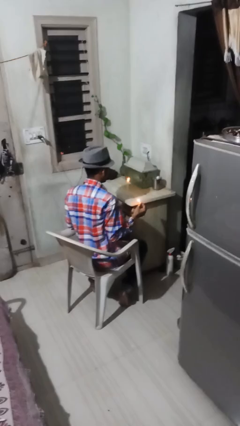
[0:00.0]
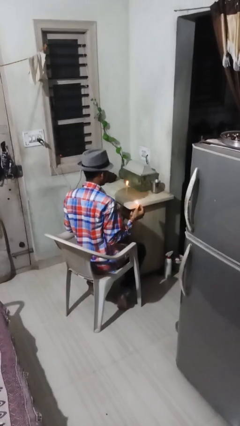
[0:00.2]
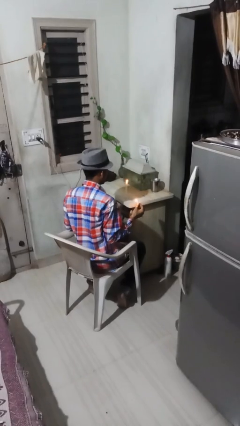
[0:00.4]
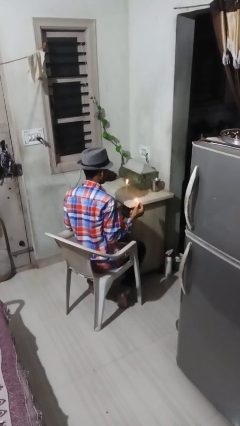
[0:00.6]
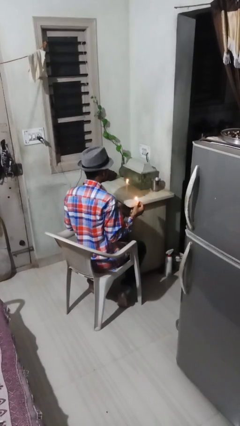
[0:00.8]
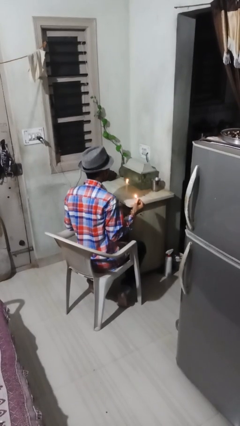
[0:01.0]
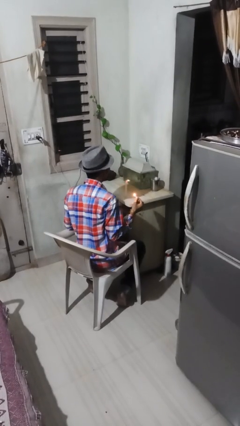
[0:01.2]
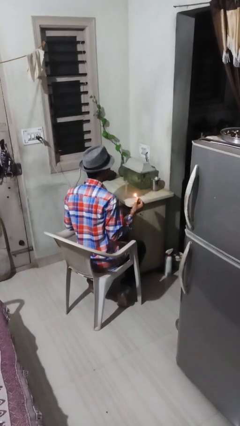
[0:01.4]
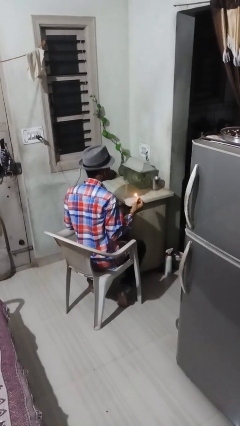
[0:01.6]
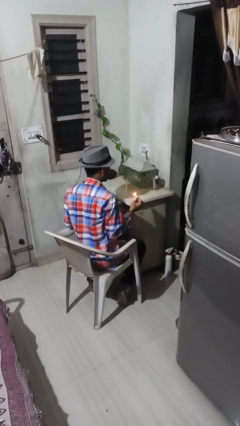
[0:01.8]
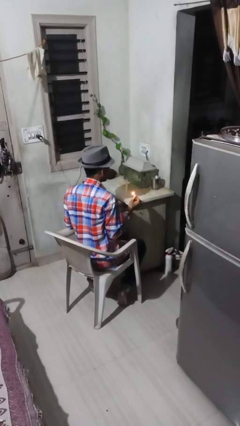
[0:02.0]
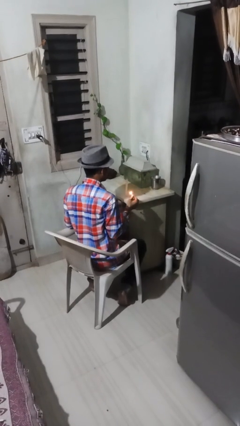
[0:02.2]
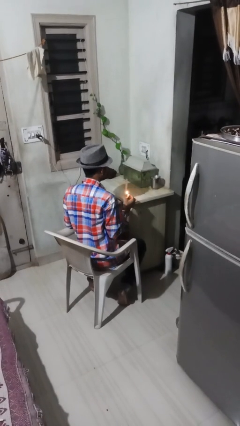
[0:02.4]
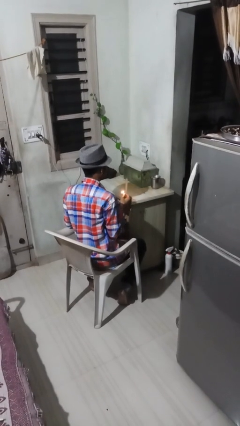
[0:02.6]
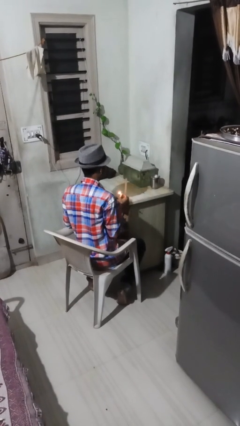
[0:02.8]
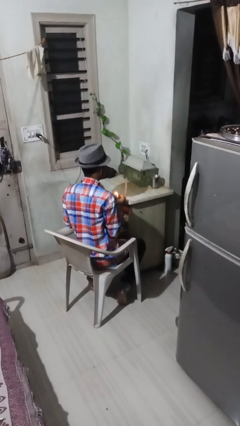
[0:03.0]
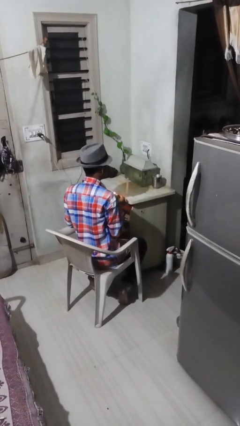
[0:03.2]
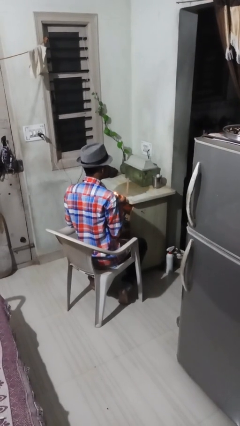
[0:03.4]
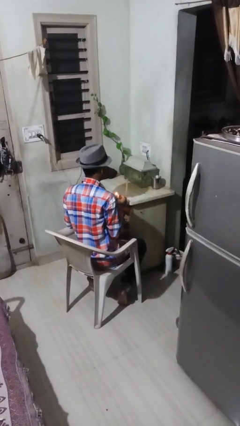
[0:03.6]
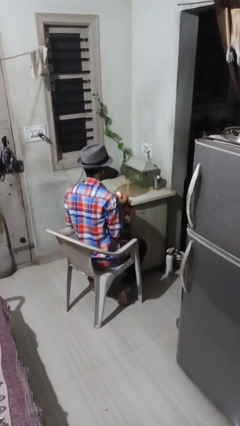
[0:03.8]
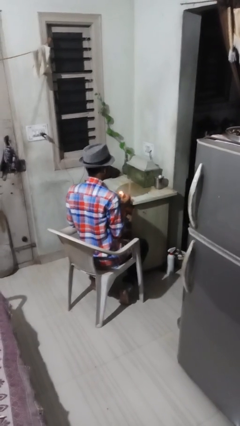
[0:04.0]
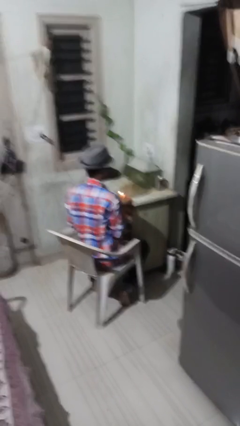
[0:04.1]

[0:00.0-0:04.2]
person extinguishes candle

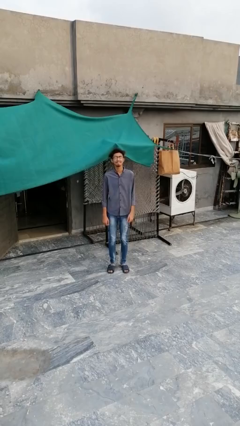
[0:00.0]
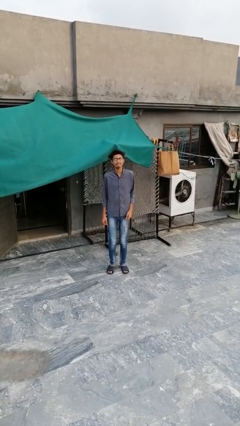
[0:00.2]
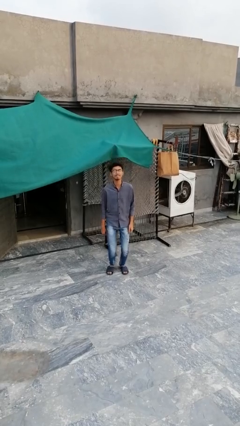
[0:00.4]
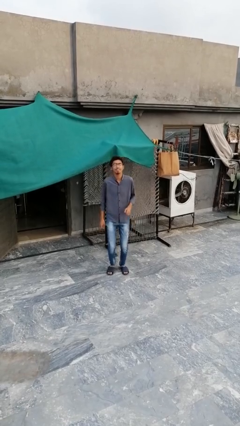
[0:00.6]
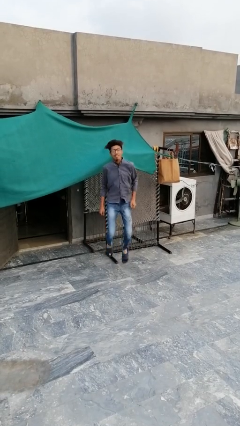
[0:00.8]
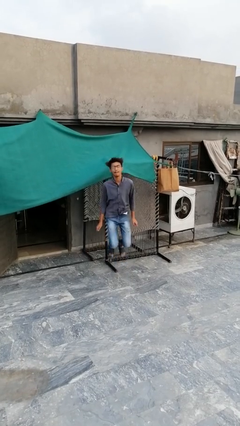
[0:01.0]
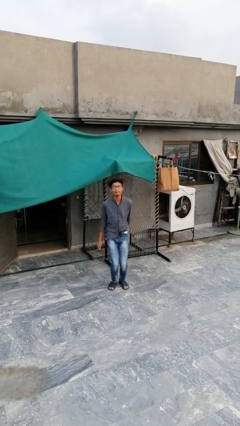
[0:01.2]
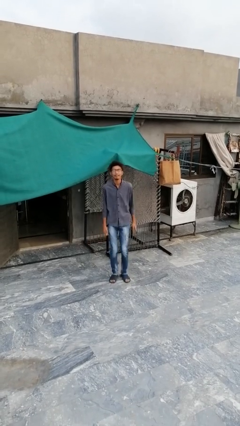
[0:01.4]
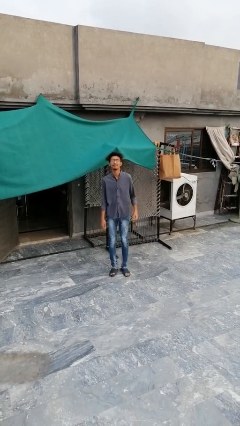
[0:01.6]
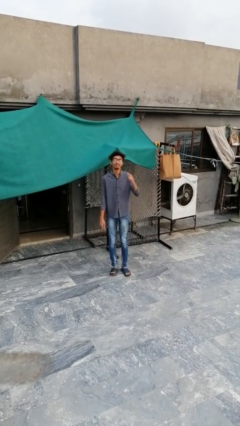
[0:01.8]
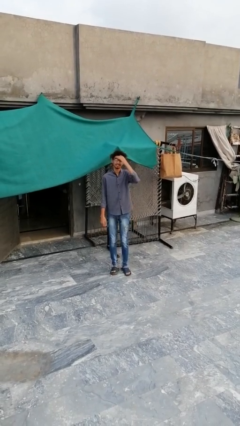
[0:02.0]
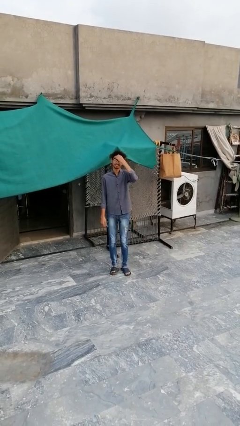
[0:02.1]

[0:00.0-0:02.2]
person jumps

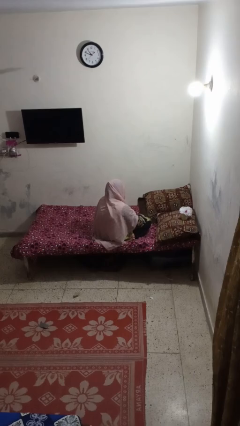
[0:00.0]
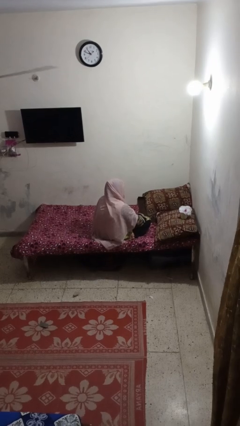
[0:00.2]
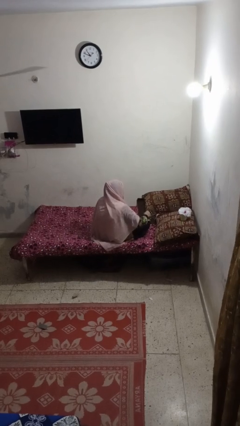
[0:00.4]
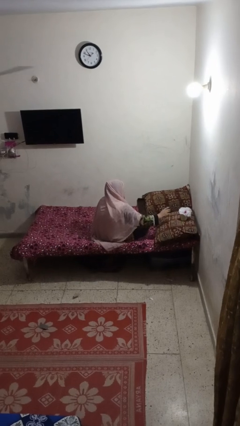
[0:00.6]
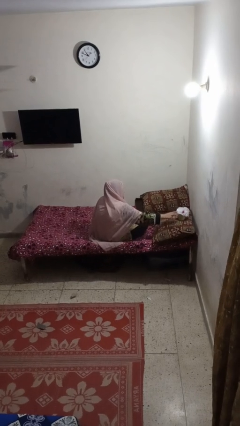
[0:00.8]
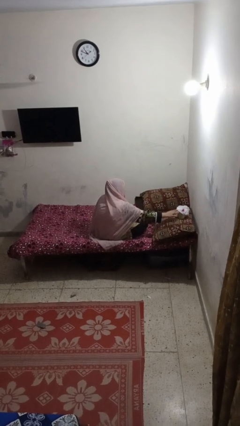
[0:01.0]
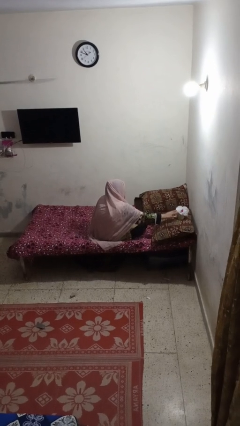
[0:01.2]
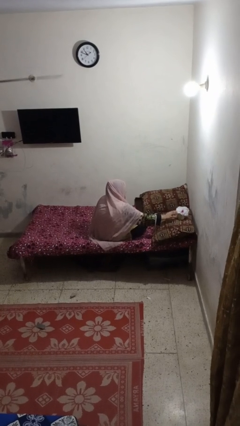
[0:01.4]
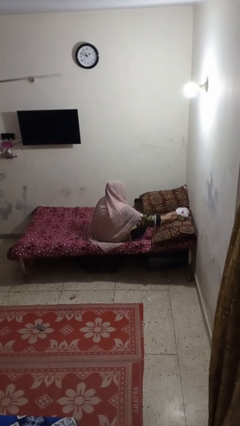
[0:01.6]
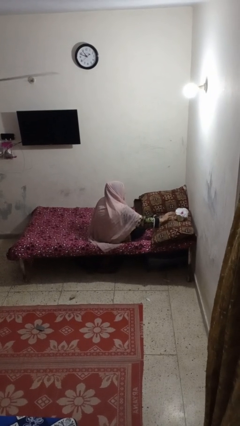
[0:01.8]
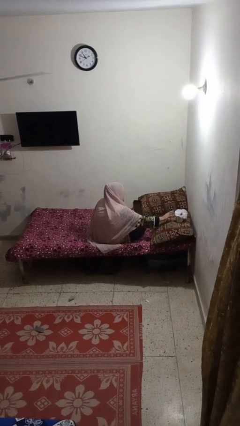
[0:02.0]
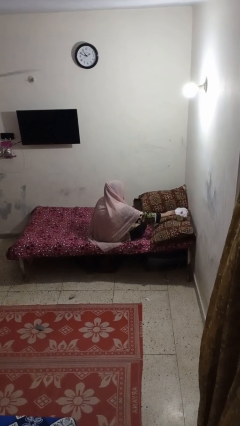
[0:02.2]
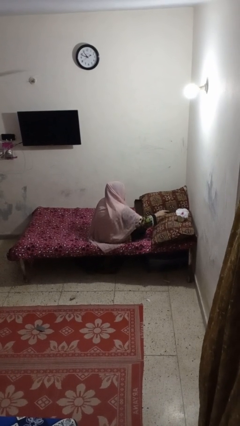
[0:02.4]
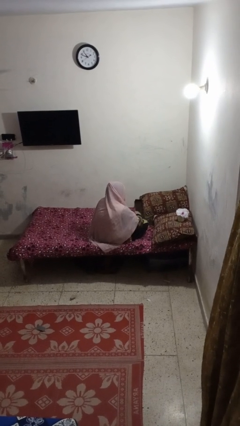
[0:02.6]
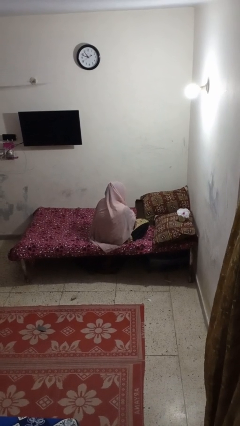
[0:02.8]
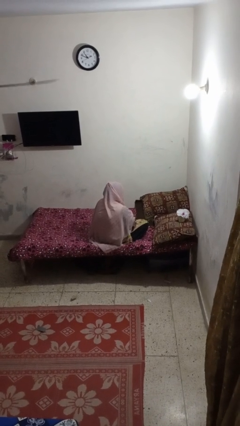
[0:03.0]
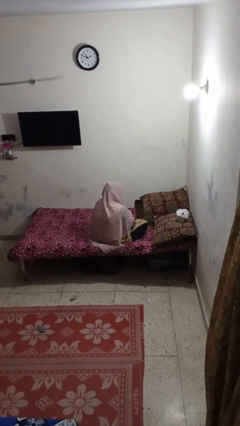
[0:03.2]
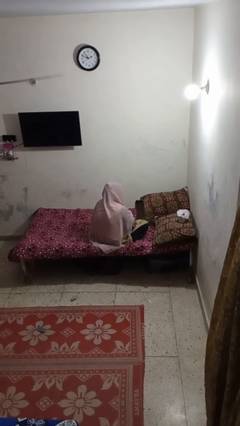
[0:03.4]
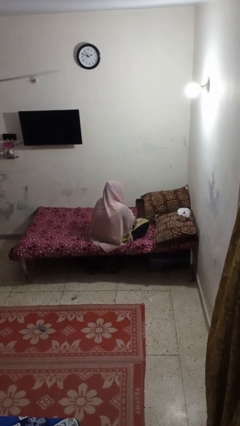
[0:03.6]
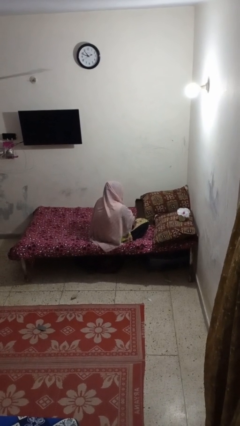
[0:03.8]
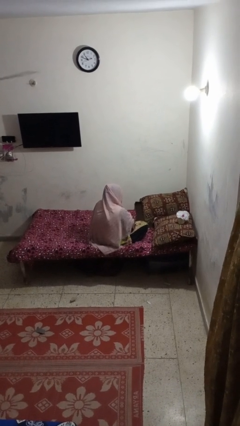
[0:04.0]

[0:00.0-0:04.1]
person arranges flowers in vase

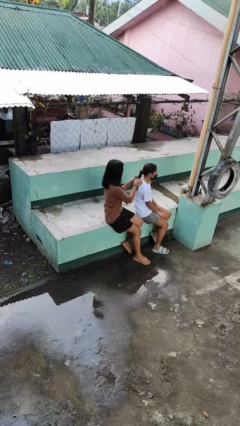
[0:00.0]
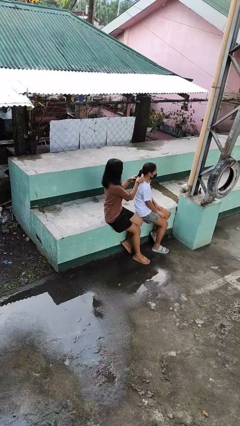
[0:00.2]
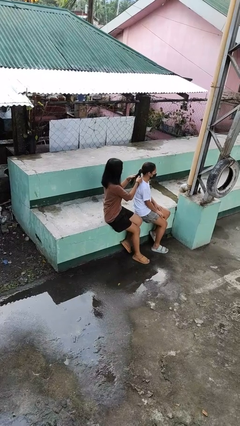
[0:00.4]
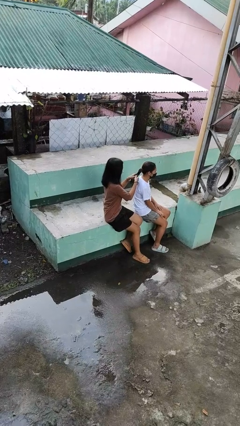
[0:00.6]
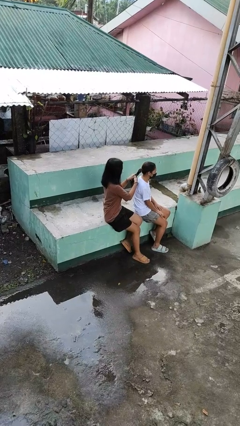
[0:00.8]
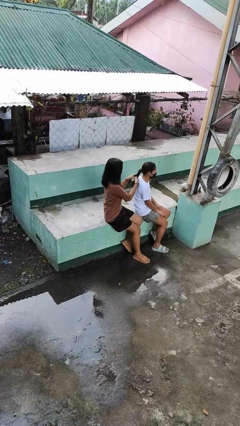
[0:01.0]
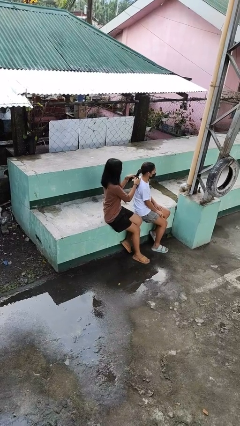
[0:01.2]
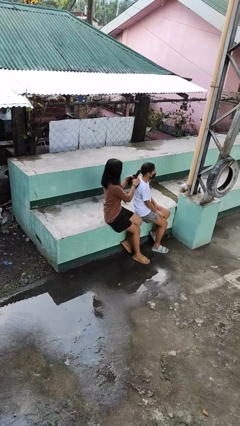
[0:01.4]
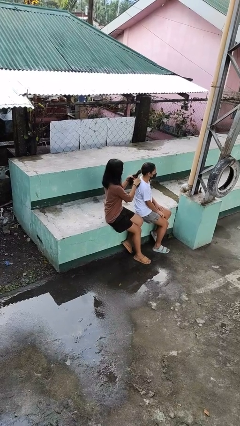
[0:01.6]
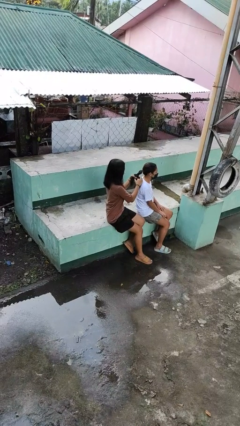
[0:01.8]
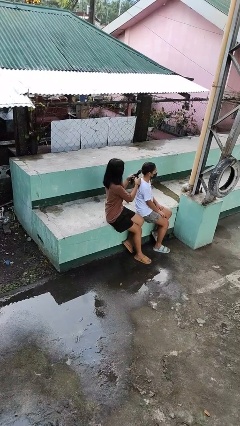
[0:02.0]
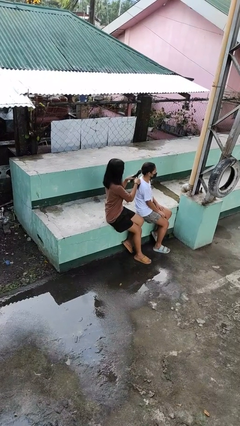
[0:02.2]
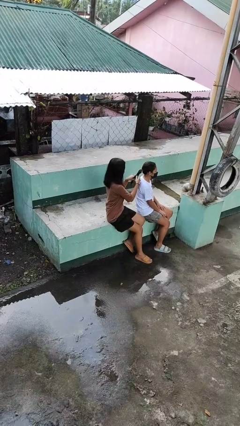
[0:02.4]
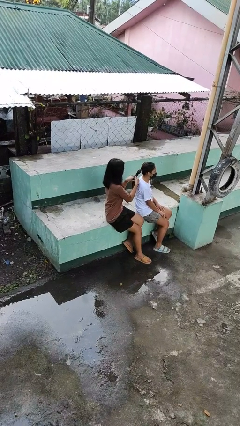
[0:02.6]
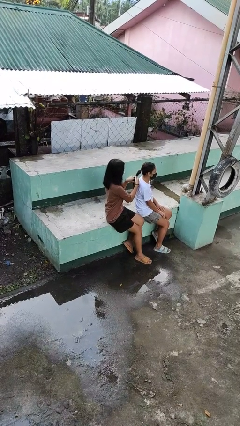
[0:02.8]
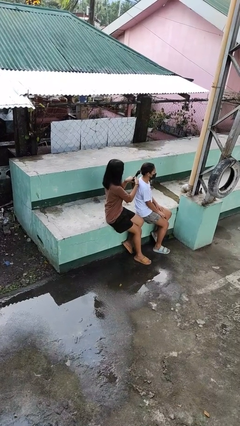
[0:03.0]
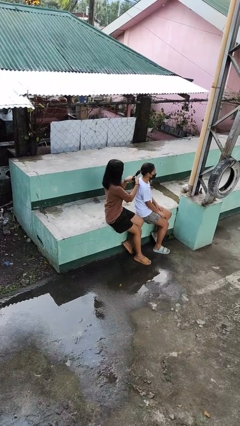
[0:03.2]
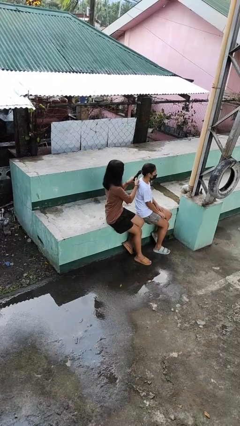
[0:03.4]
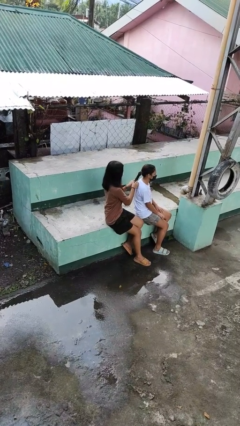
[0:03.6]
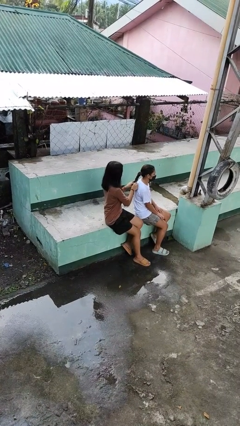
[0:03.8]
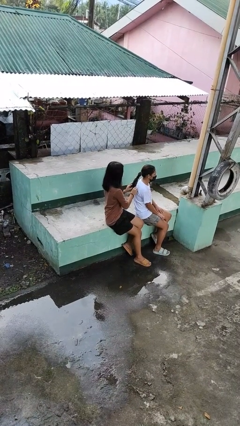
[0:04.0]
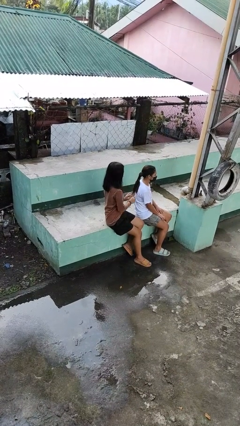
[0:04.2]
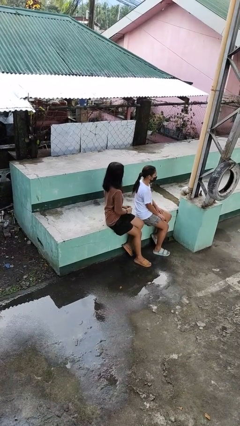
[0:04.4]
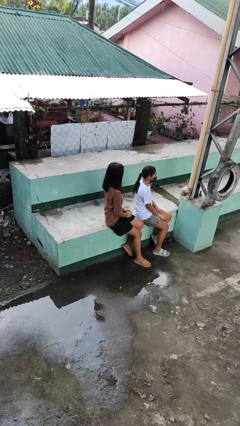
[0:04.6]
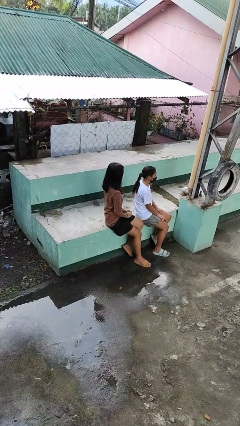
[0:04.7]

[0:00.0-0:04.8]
person braids hair of person

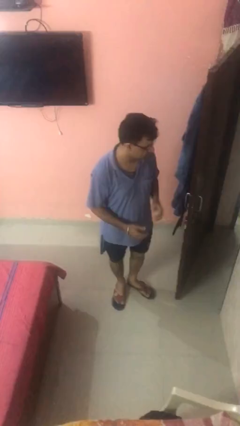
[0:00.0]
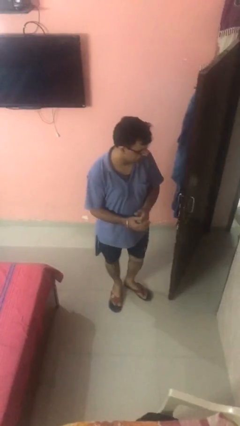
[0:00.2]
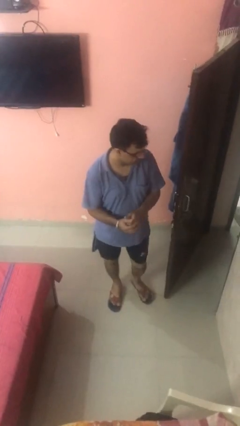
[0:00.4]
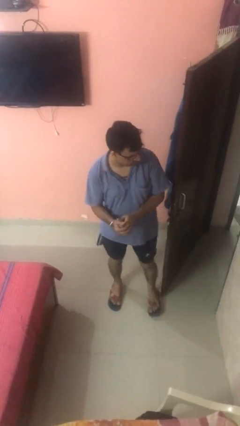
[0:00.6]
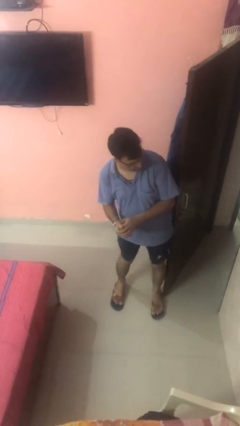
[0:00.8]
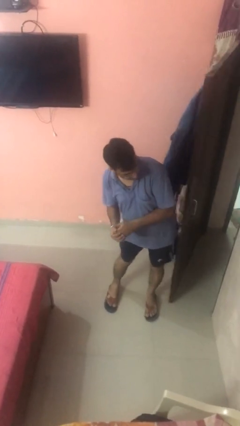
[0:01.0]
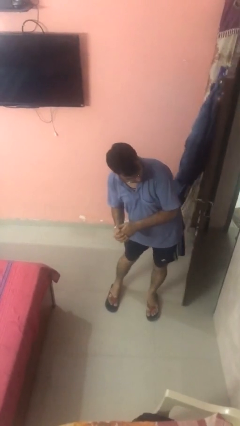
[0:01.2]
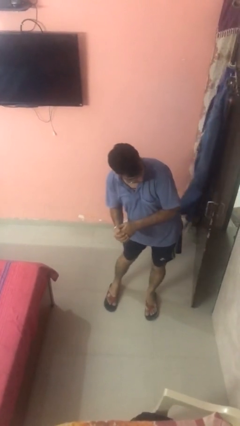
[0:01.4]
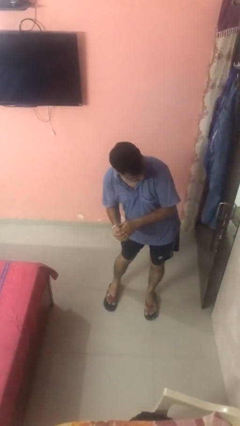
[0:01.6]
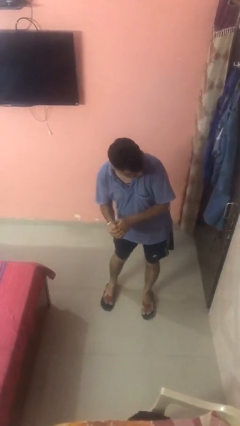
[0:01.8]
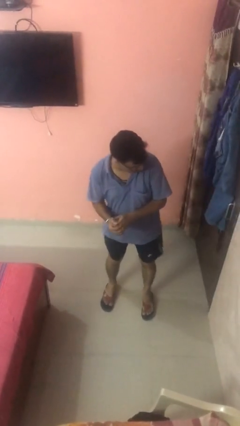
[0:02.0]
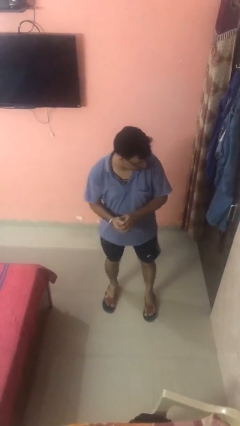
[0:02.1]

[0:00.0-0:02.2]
person closes door with hip
